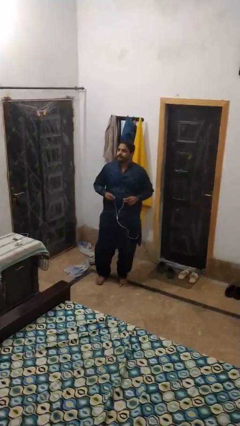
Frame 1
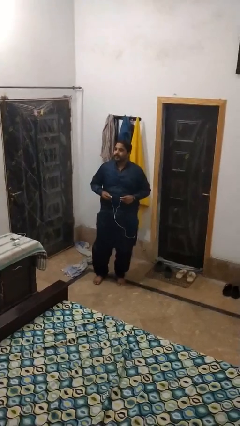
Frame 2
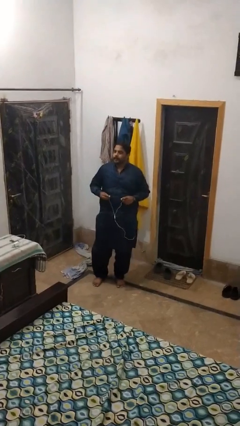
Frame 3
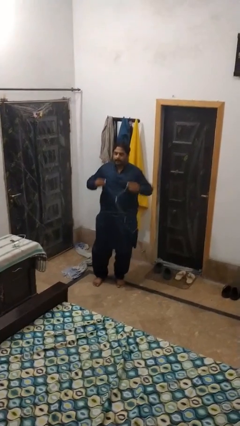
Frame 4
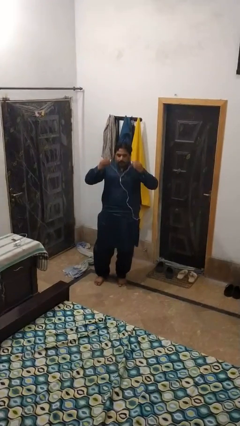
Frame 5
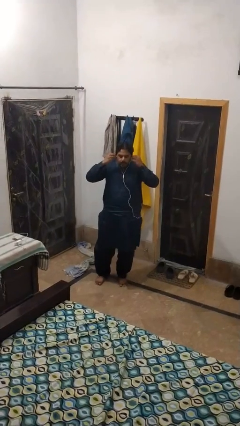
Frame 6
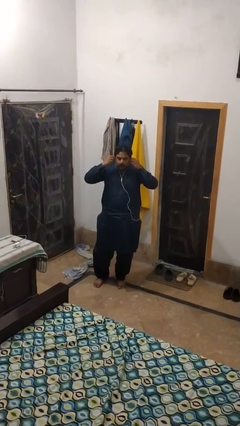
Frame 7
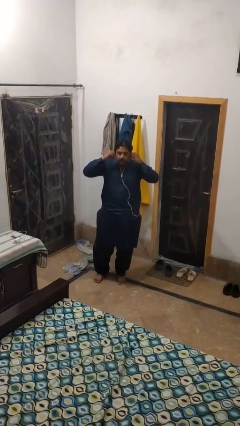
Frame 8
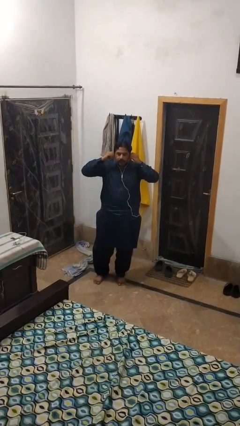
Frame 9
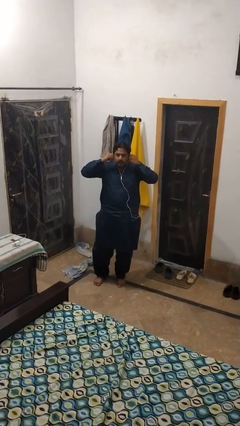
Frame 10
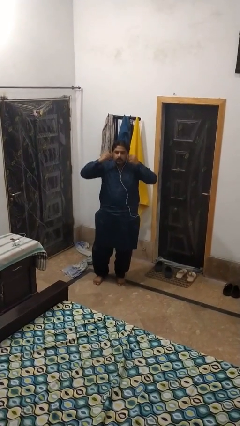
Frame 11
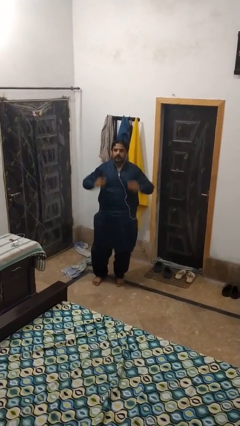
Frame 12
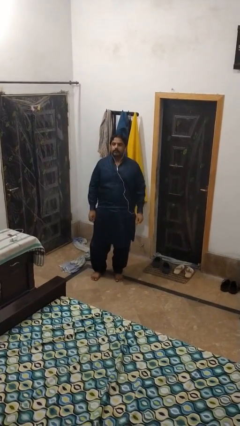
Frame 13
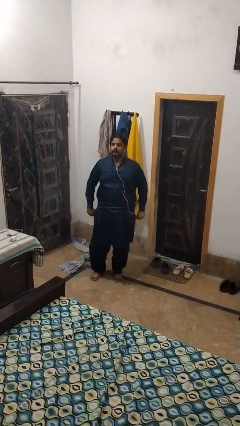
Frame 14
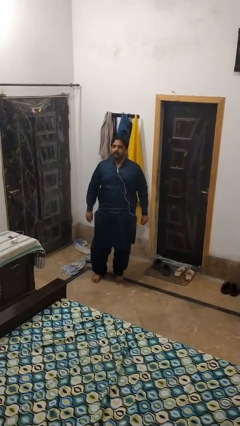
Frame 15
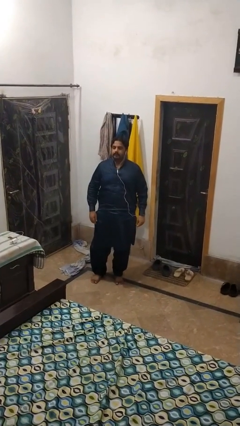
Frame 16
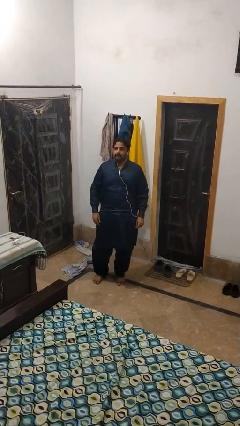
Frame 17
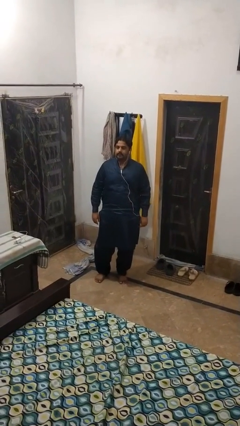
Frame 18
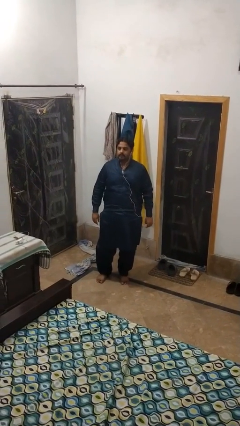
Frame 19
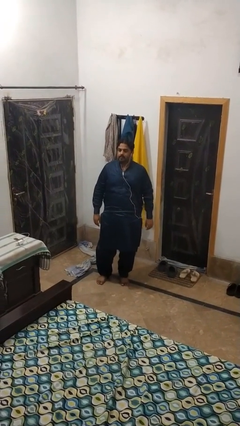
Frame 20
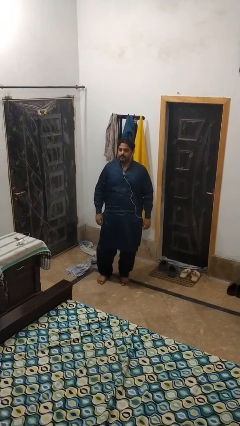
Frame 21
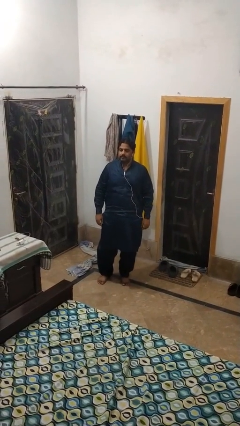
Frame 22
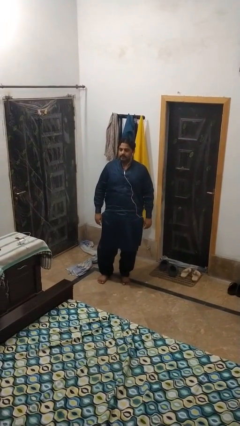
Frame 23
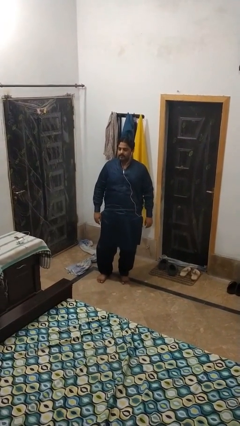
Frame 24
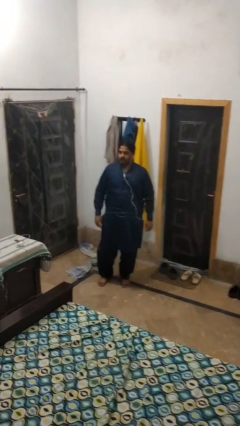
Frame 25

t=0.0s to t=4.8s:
person puts on headphones

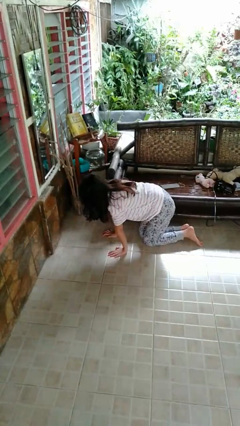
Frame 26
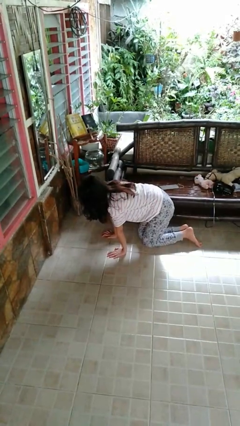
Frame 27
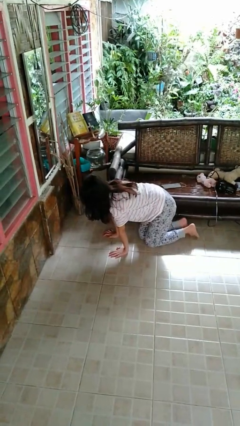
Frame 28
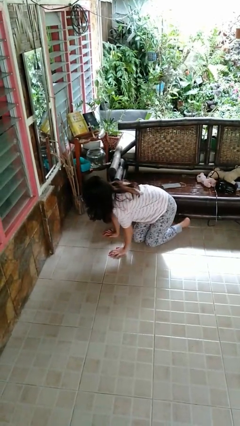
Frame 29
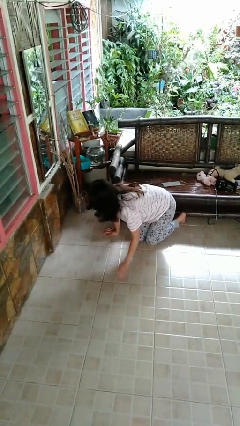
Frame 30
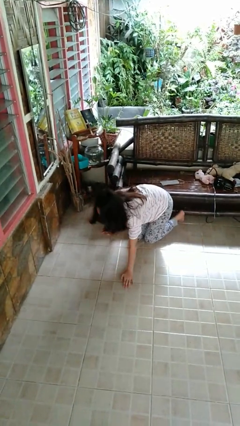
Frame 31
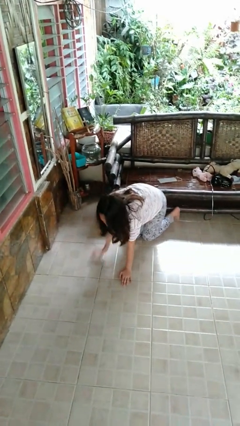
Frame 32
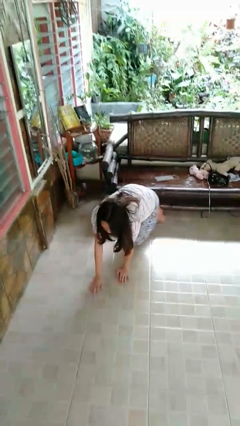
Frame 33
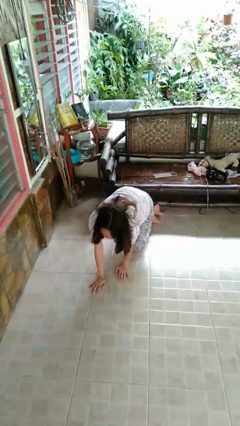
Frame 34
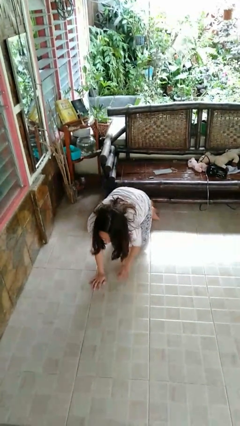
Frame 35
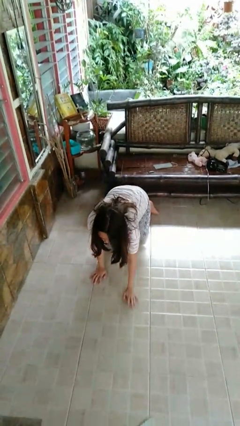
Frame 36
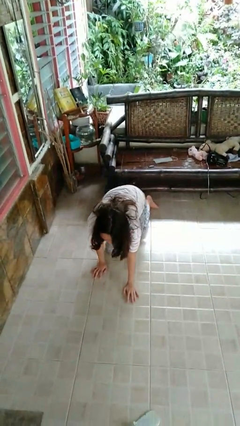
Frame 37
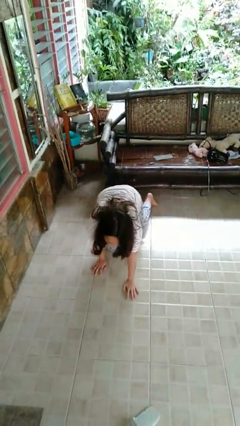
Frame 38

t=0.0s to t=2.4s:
person crawls

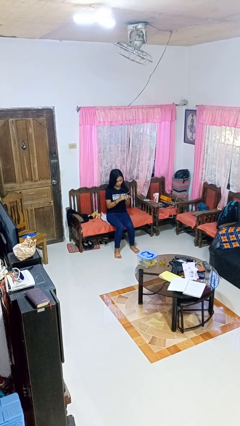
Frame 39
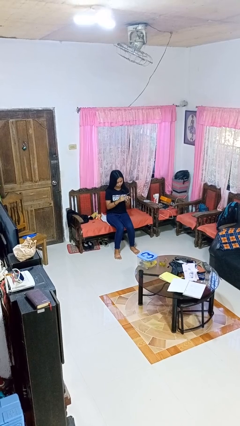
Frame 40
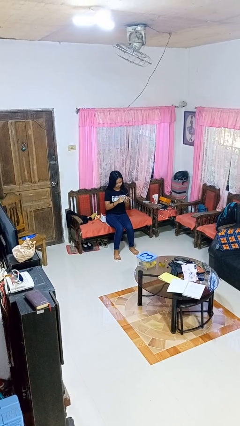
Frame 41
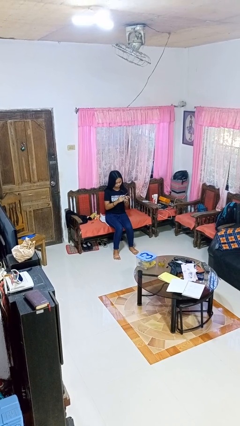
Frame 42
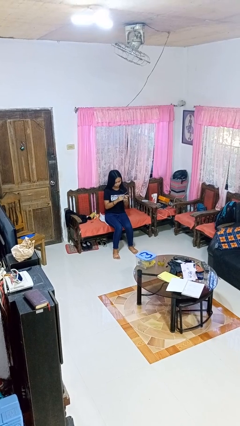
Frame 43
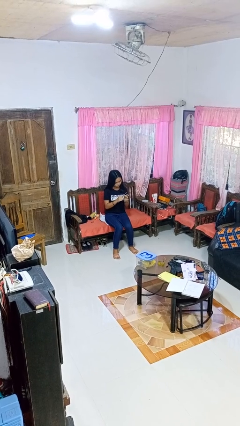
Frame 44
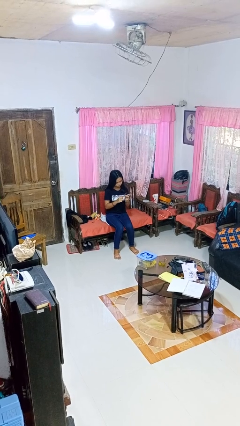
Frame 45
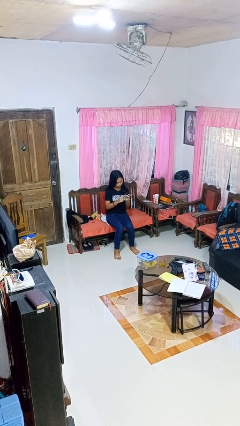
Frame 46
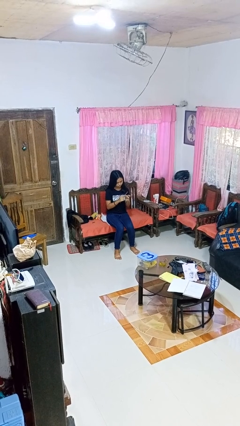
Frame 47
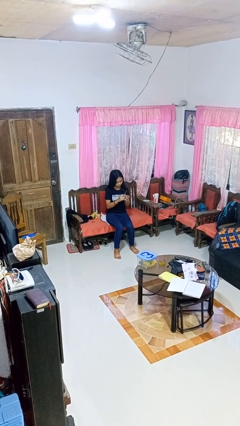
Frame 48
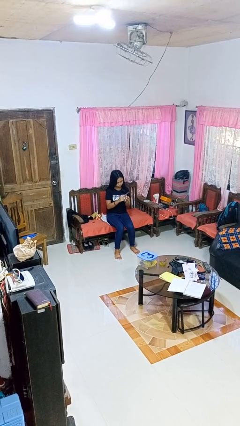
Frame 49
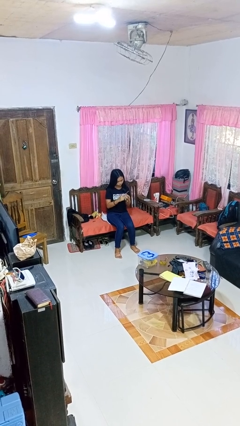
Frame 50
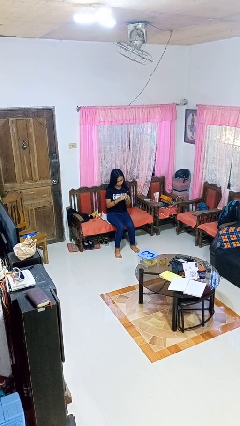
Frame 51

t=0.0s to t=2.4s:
person files fingernails

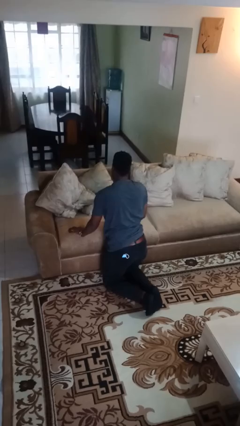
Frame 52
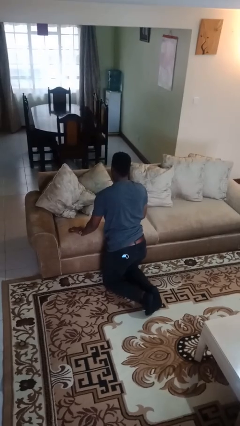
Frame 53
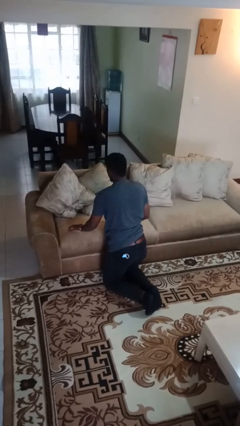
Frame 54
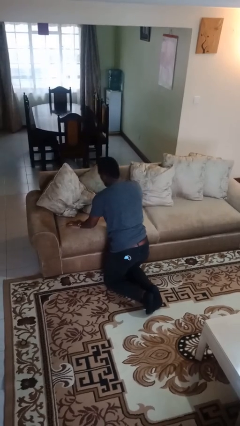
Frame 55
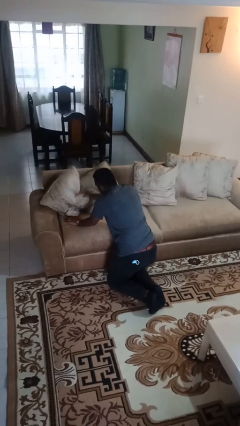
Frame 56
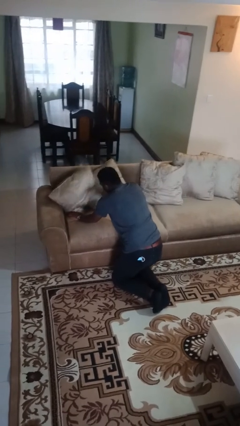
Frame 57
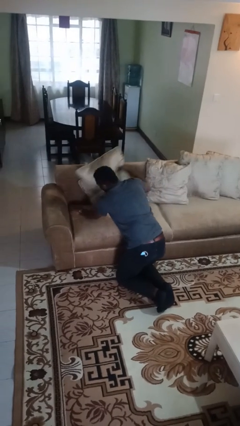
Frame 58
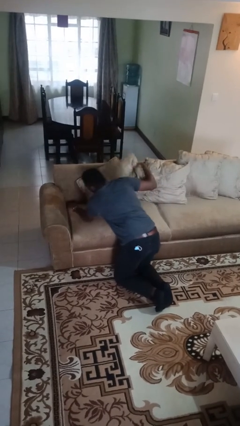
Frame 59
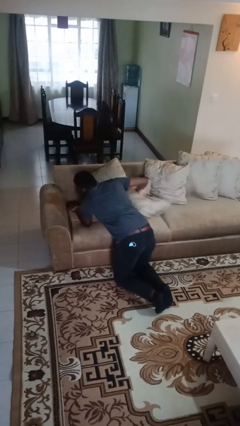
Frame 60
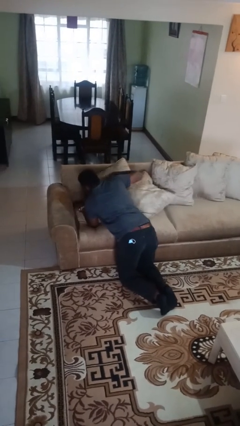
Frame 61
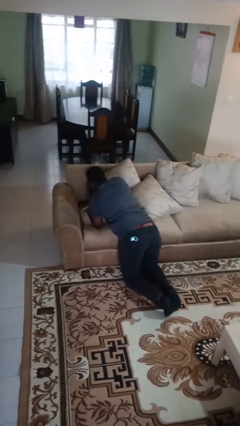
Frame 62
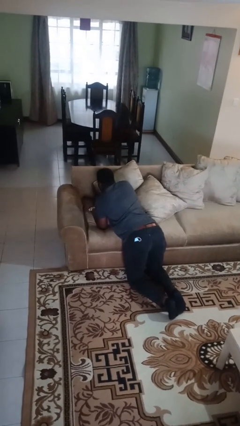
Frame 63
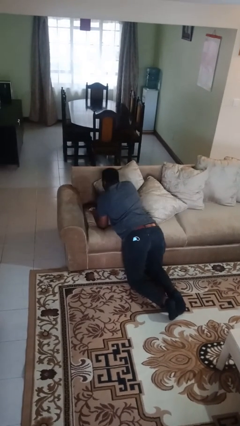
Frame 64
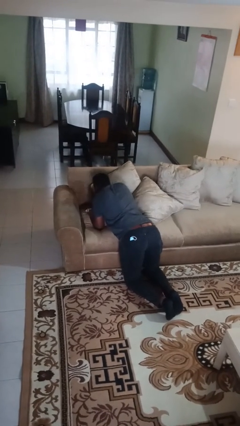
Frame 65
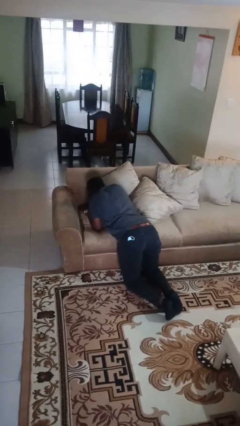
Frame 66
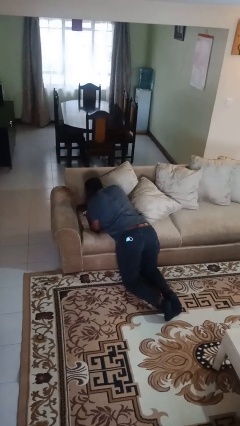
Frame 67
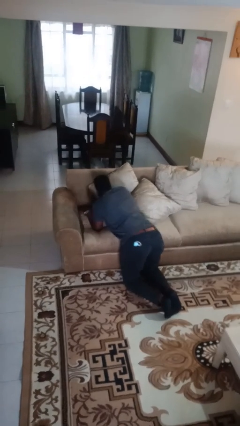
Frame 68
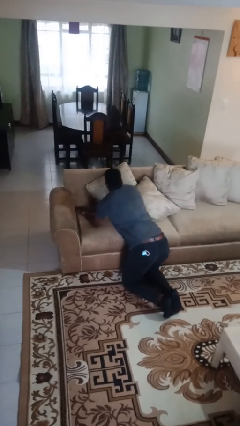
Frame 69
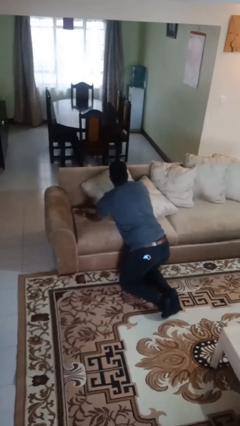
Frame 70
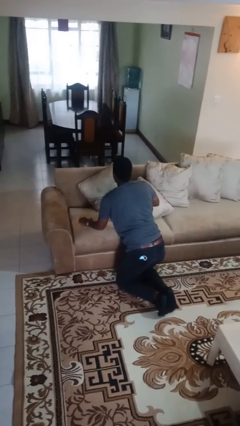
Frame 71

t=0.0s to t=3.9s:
person searches in couch

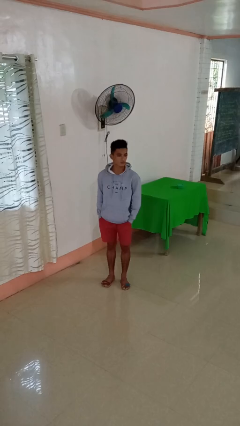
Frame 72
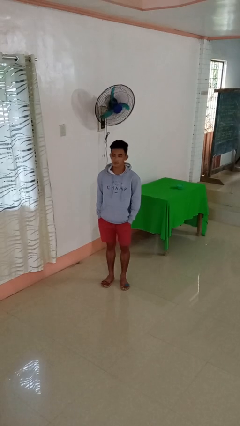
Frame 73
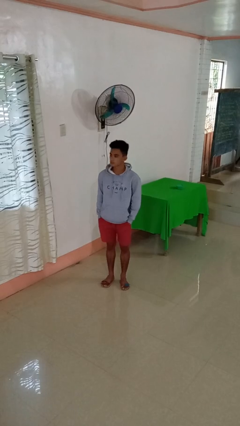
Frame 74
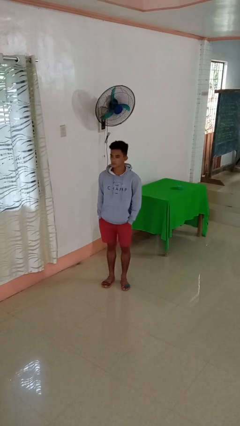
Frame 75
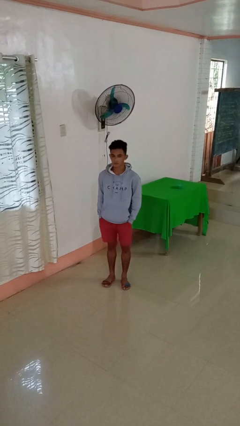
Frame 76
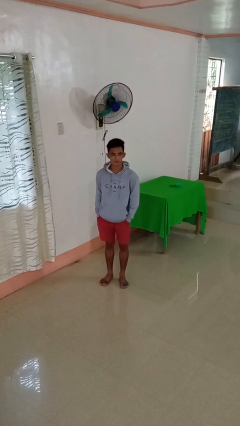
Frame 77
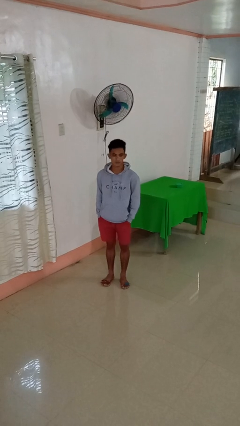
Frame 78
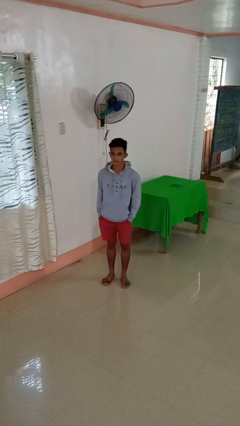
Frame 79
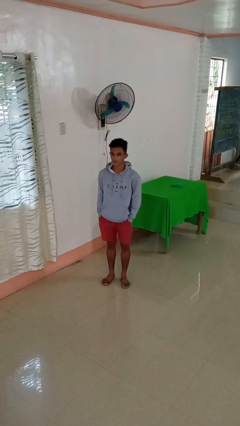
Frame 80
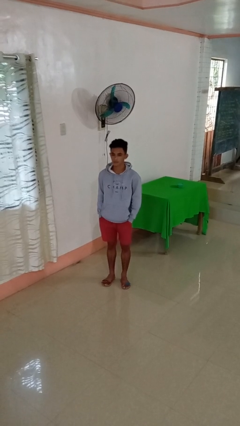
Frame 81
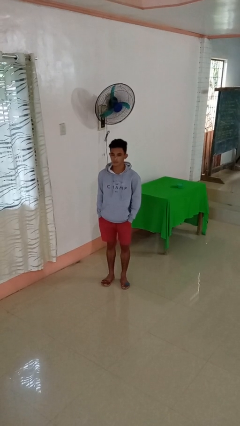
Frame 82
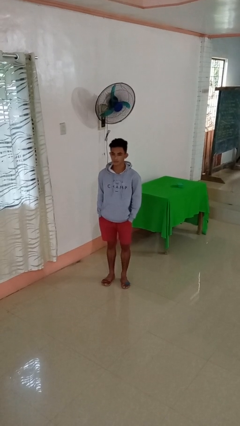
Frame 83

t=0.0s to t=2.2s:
person shakes head

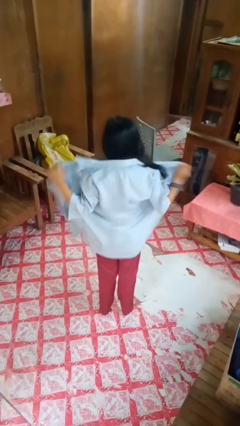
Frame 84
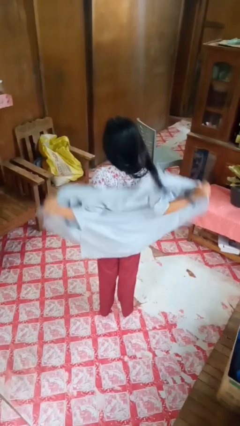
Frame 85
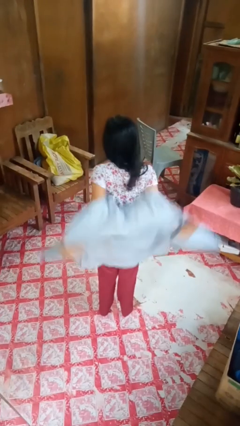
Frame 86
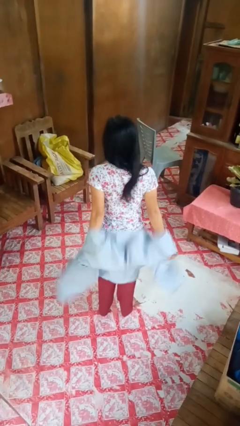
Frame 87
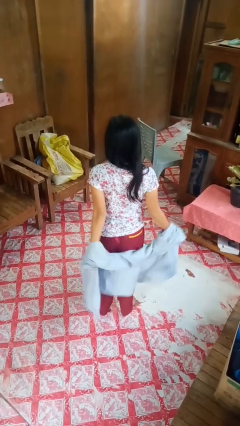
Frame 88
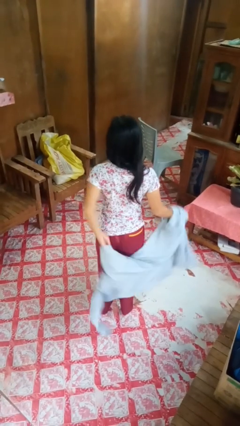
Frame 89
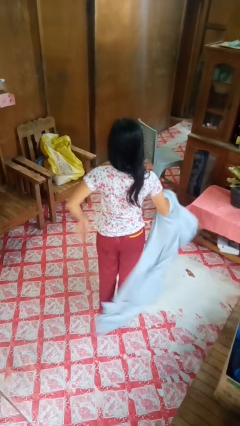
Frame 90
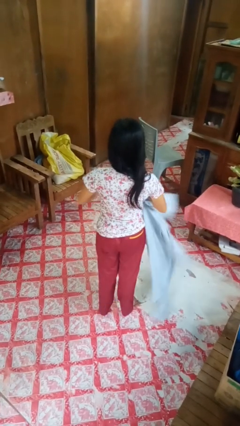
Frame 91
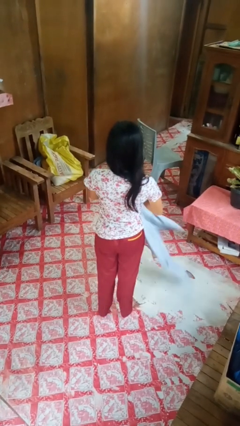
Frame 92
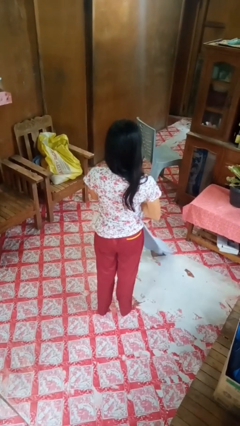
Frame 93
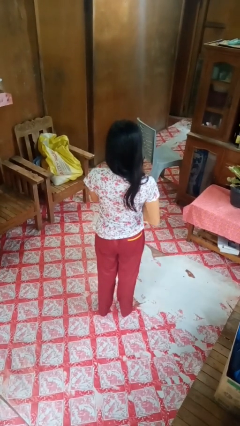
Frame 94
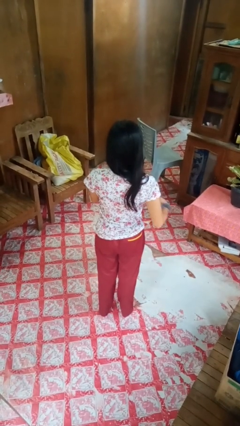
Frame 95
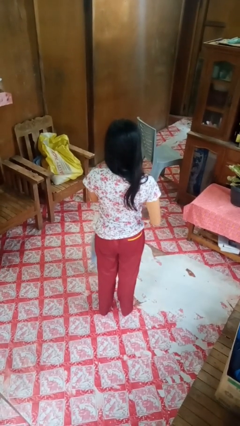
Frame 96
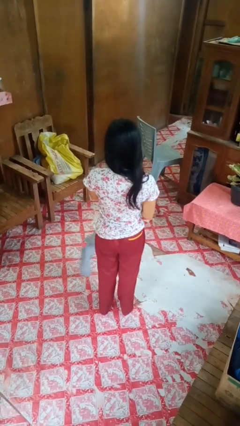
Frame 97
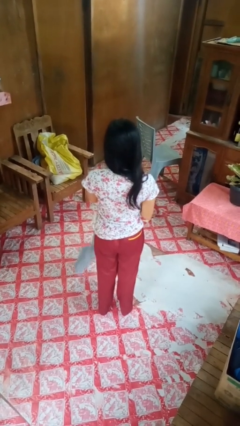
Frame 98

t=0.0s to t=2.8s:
person takes off shirt
